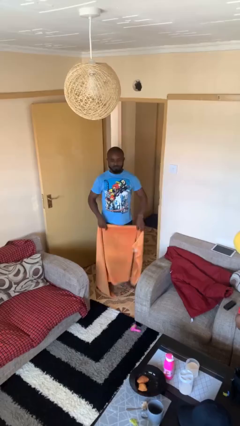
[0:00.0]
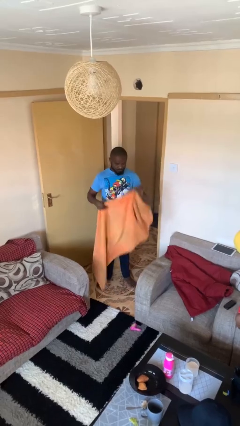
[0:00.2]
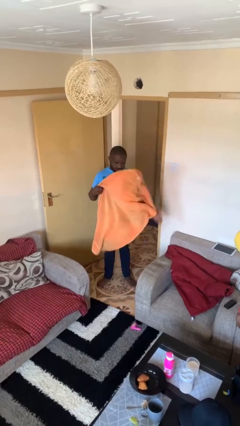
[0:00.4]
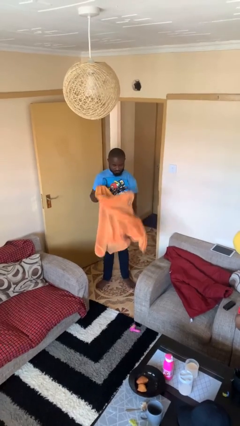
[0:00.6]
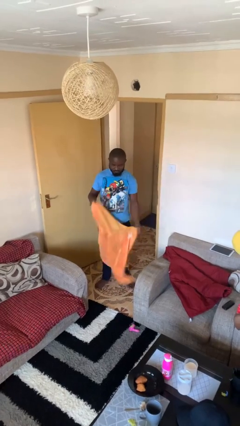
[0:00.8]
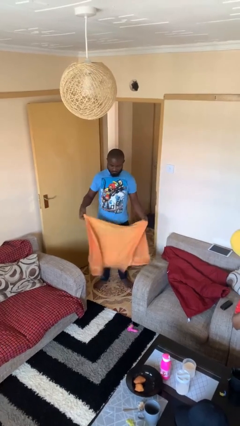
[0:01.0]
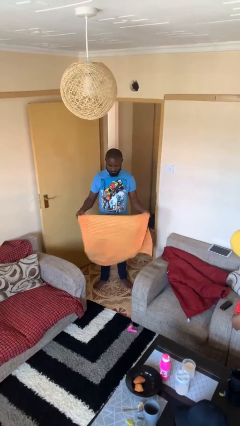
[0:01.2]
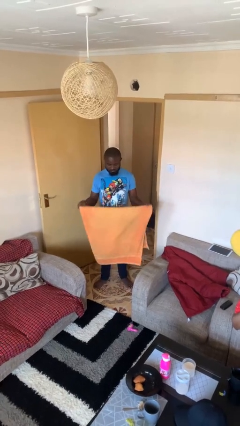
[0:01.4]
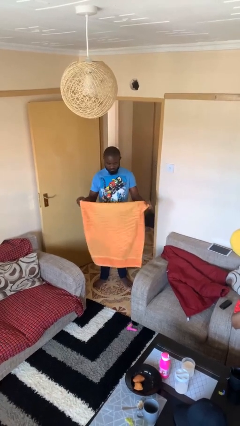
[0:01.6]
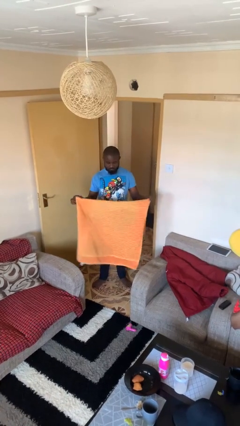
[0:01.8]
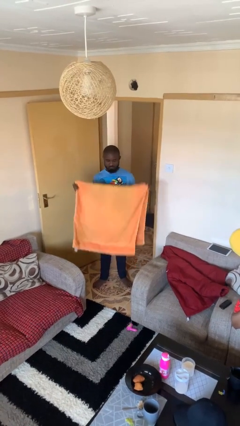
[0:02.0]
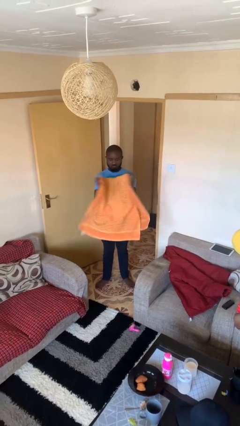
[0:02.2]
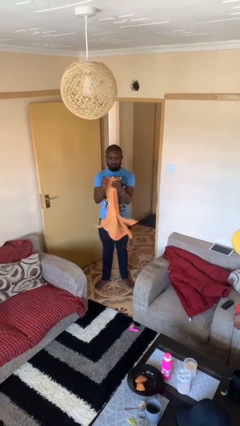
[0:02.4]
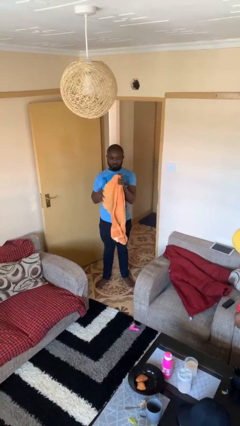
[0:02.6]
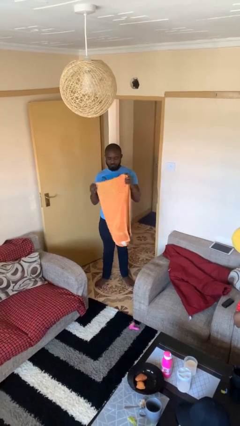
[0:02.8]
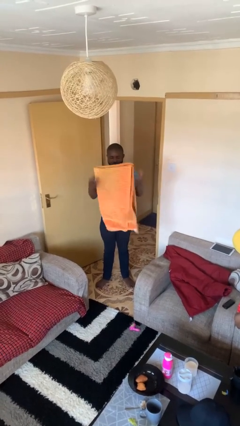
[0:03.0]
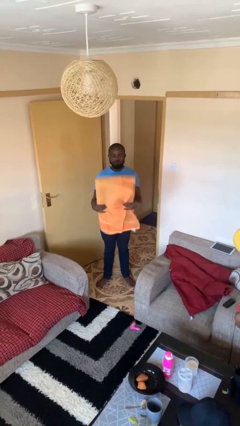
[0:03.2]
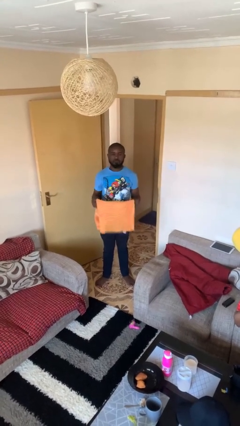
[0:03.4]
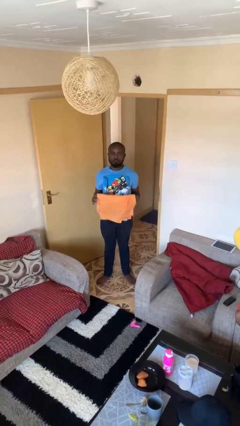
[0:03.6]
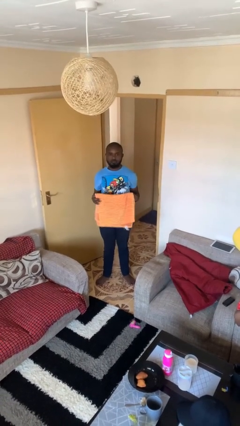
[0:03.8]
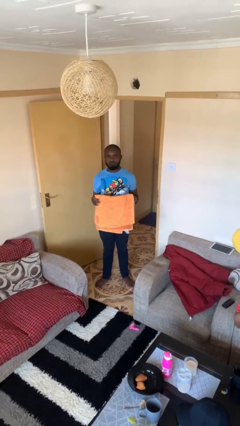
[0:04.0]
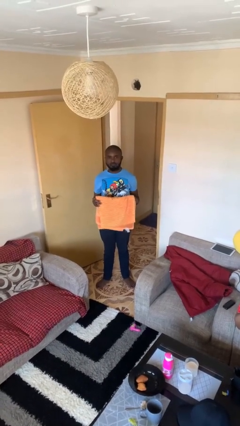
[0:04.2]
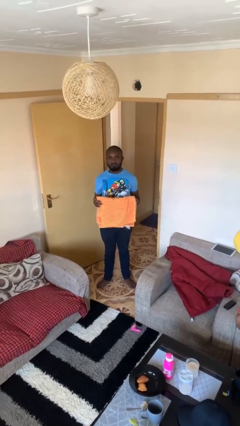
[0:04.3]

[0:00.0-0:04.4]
person folds towel

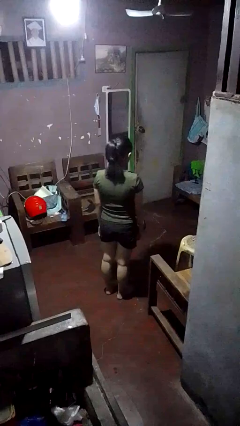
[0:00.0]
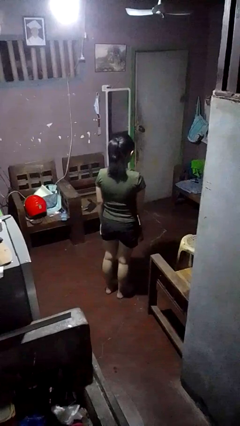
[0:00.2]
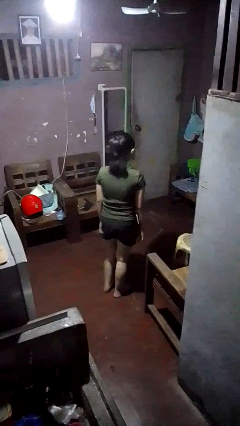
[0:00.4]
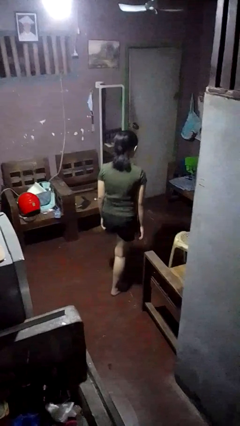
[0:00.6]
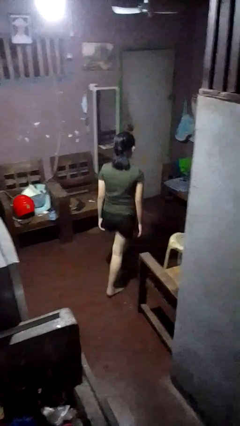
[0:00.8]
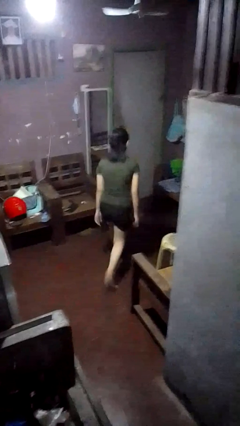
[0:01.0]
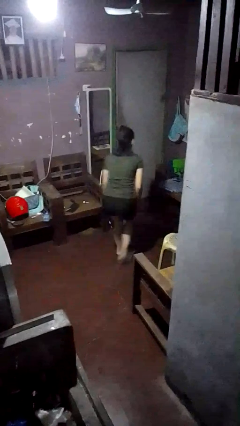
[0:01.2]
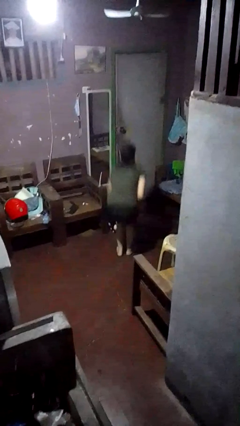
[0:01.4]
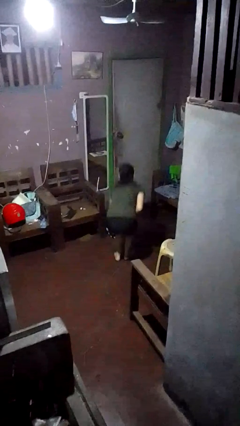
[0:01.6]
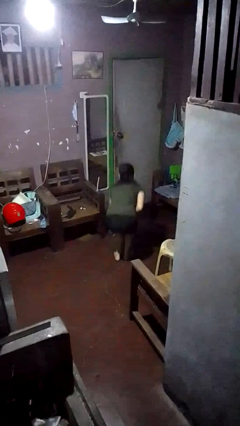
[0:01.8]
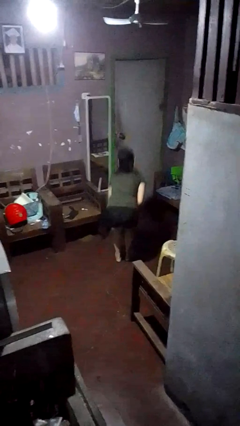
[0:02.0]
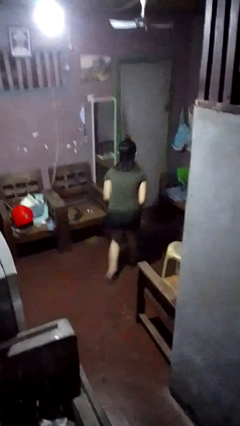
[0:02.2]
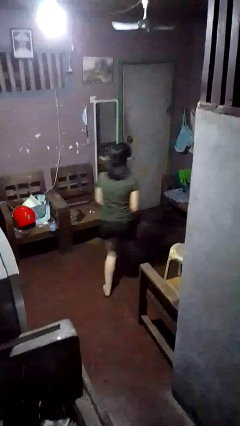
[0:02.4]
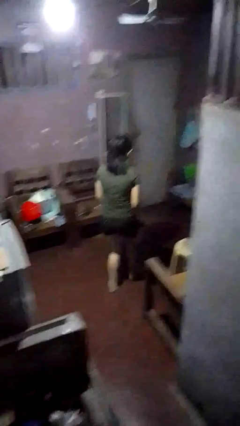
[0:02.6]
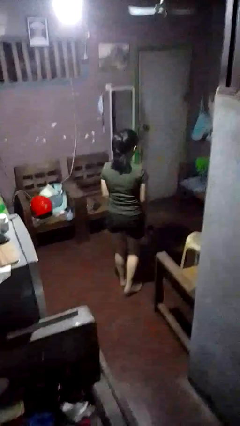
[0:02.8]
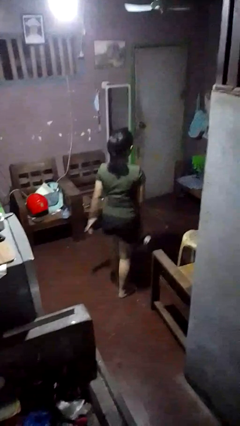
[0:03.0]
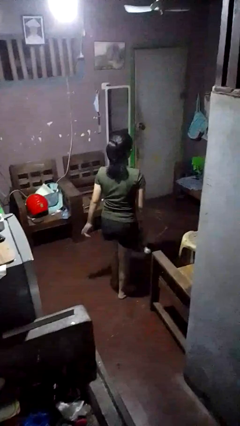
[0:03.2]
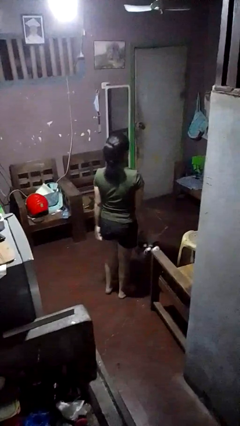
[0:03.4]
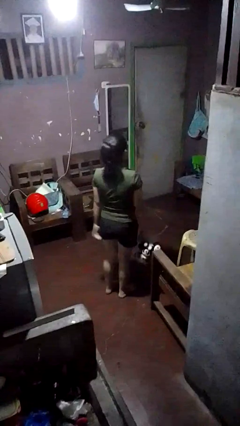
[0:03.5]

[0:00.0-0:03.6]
person picks up object from floor

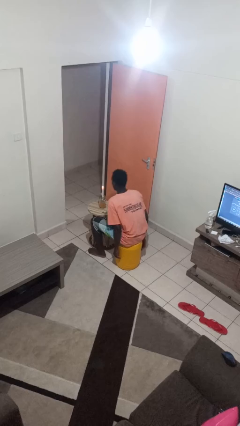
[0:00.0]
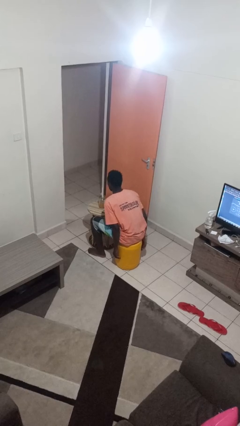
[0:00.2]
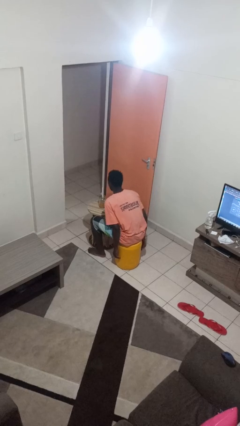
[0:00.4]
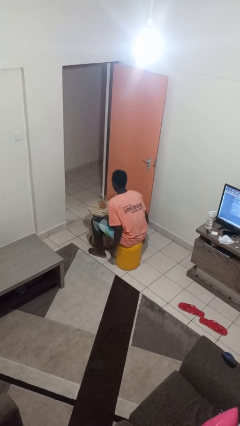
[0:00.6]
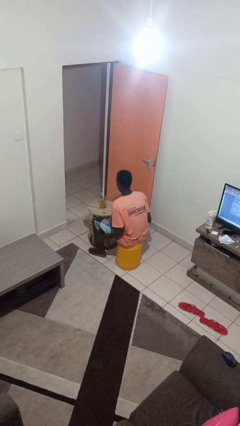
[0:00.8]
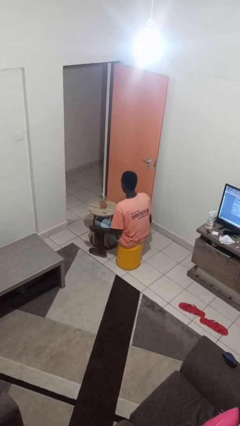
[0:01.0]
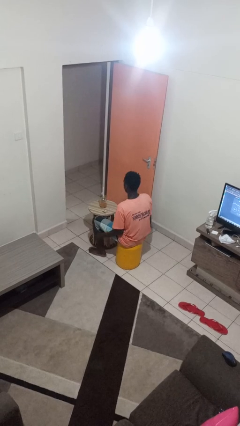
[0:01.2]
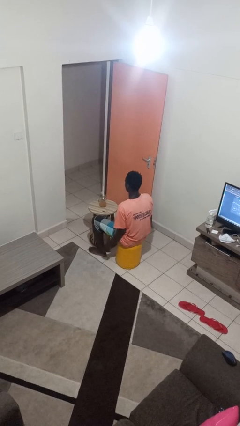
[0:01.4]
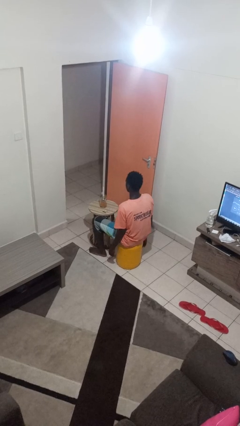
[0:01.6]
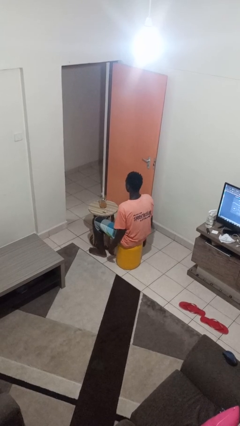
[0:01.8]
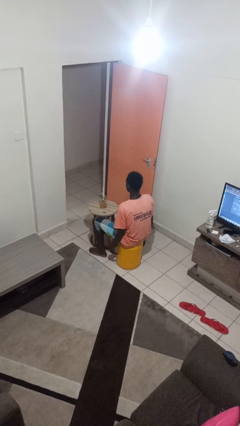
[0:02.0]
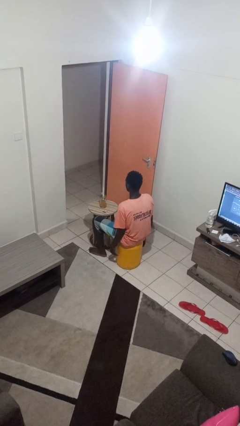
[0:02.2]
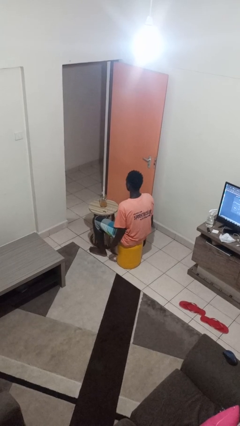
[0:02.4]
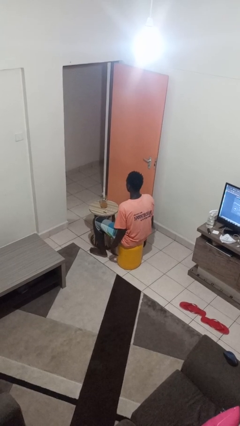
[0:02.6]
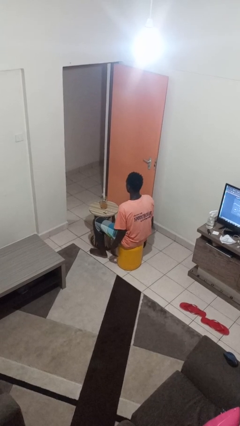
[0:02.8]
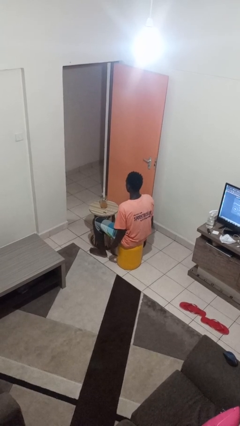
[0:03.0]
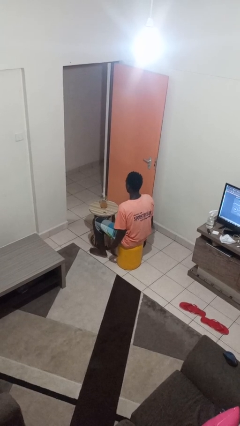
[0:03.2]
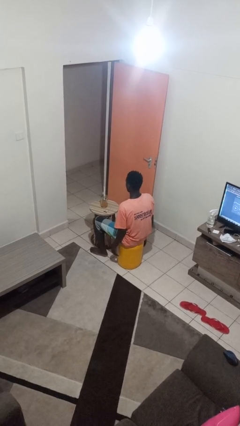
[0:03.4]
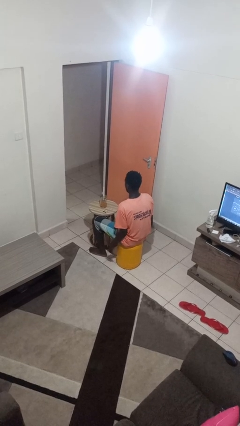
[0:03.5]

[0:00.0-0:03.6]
person extinguishes candle

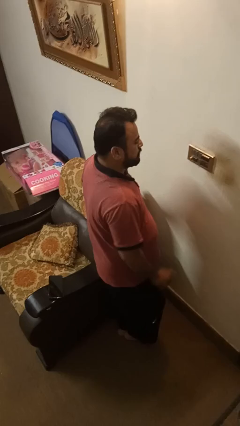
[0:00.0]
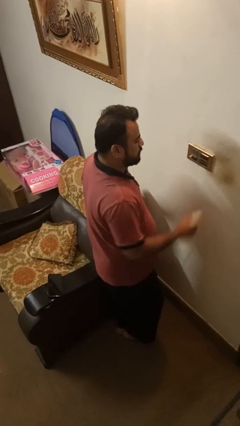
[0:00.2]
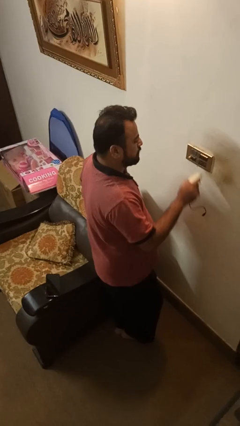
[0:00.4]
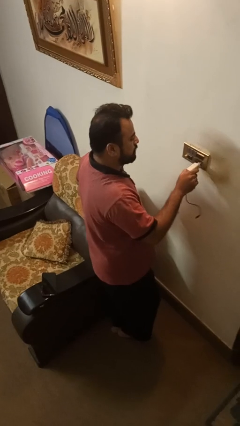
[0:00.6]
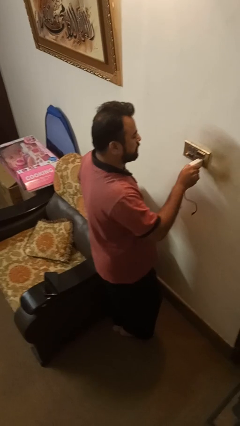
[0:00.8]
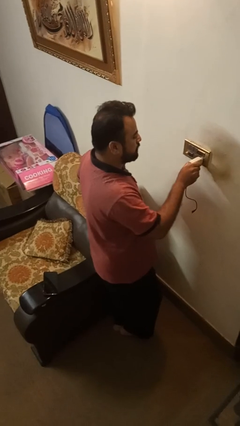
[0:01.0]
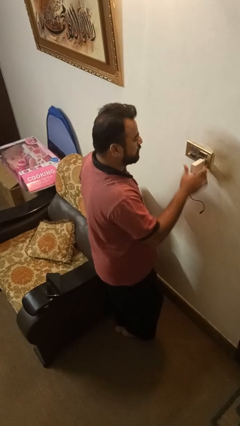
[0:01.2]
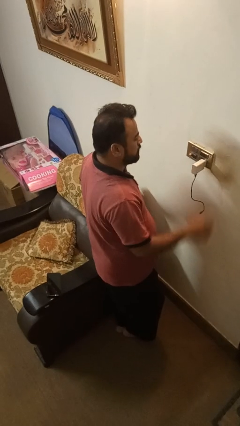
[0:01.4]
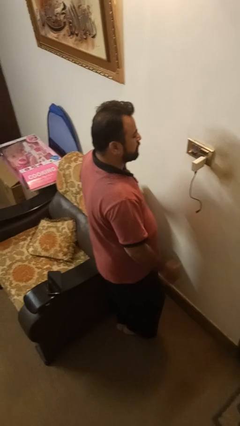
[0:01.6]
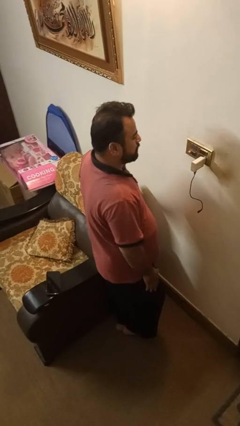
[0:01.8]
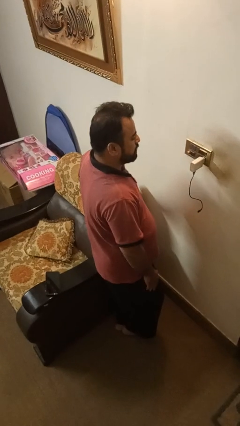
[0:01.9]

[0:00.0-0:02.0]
person plugs into electrical socket

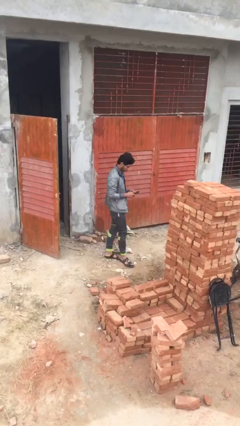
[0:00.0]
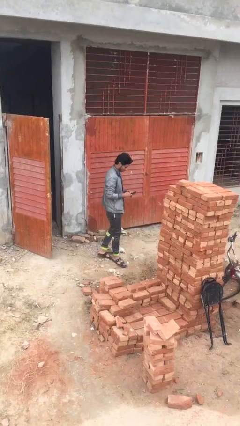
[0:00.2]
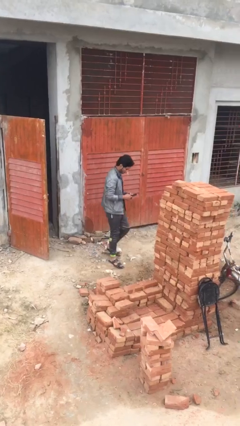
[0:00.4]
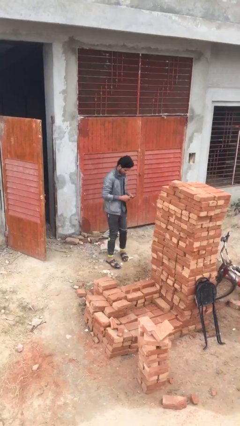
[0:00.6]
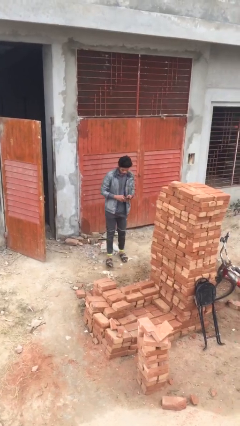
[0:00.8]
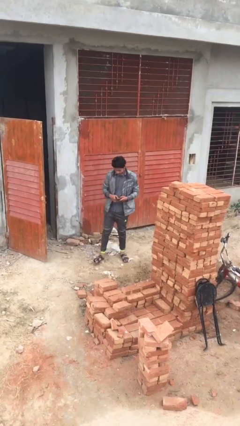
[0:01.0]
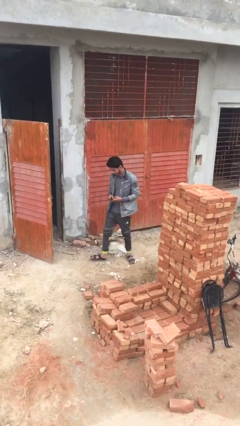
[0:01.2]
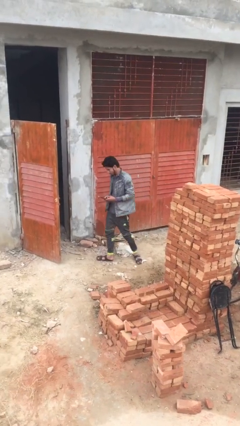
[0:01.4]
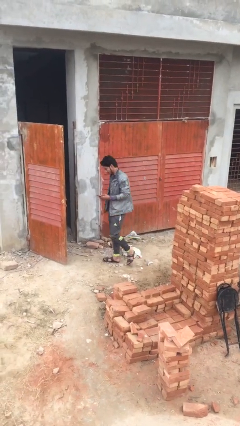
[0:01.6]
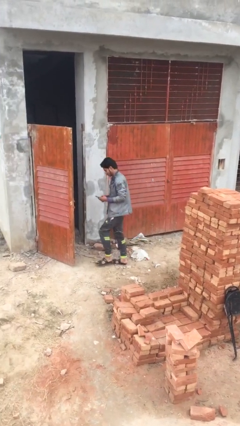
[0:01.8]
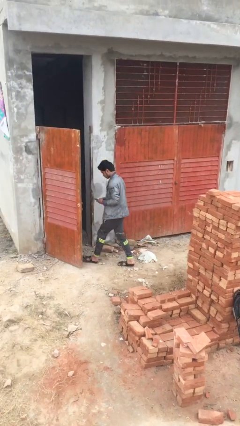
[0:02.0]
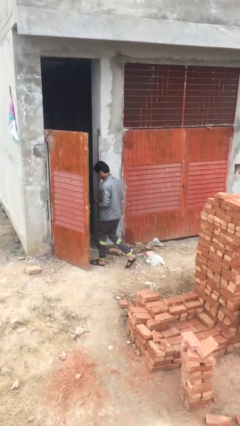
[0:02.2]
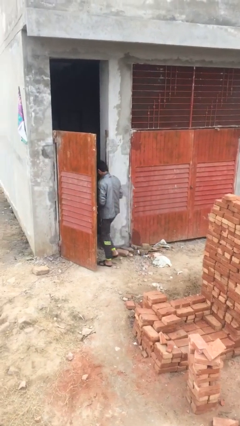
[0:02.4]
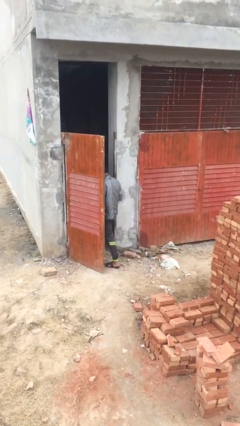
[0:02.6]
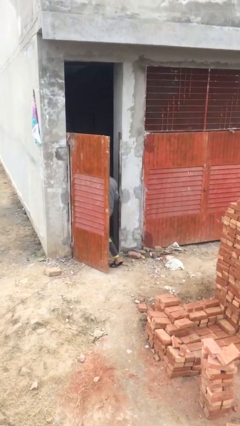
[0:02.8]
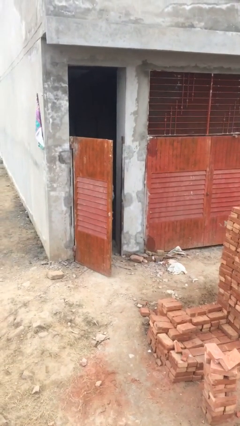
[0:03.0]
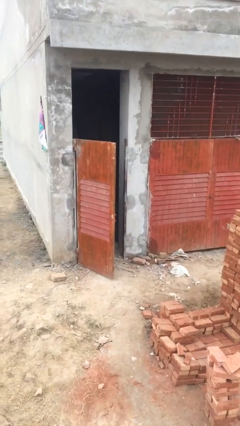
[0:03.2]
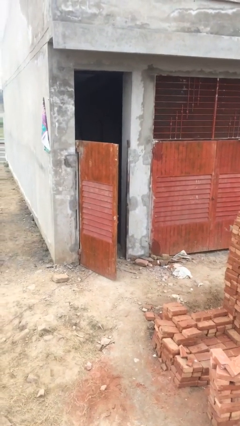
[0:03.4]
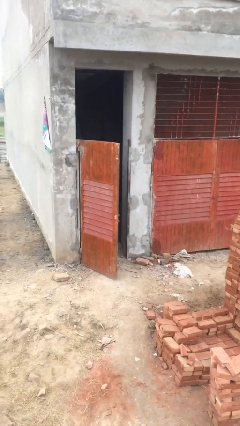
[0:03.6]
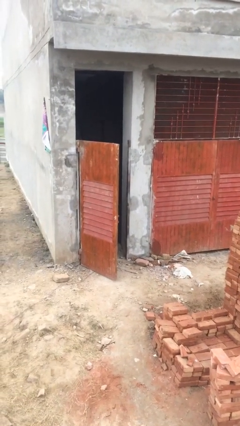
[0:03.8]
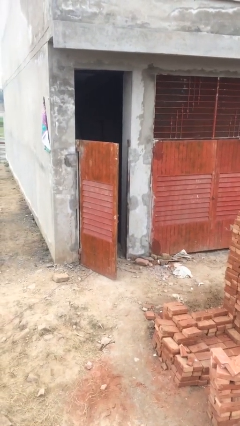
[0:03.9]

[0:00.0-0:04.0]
person exits scene through structure
